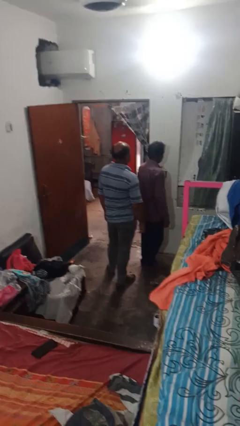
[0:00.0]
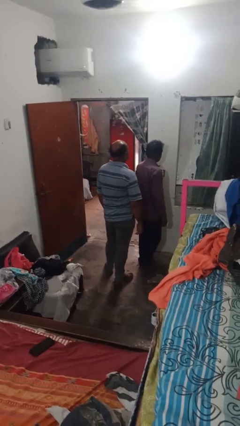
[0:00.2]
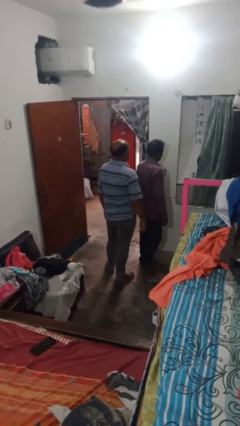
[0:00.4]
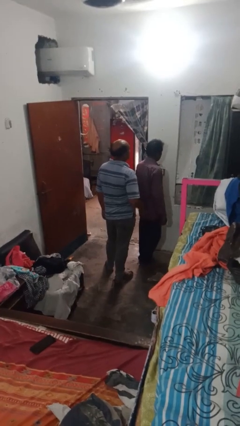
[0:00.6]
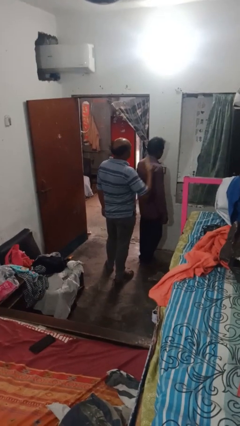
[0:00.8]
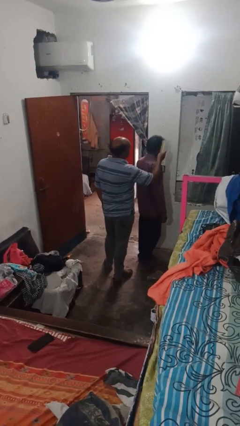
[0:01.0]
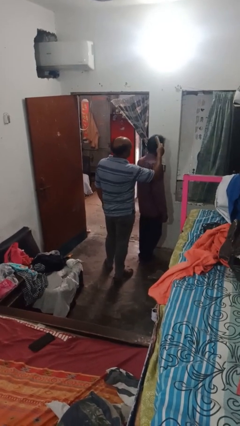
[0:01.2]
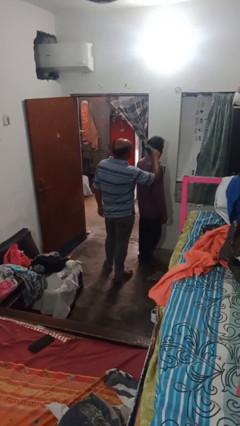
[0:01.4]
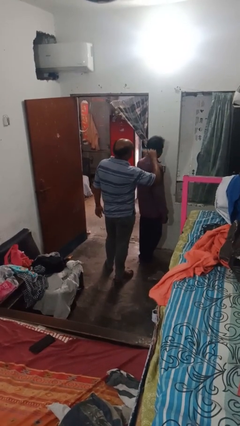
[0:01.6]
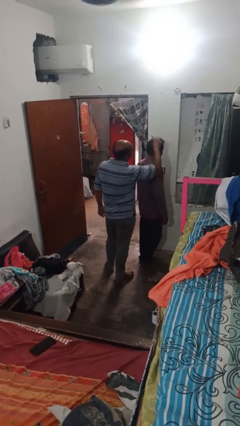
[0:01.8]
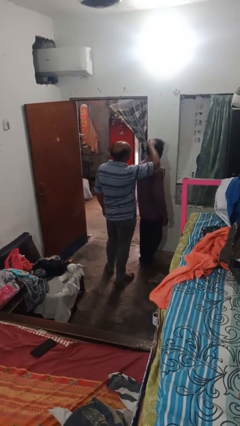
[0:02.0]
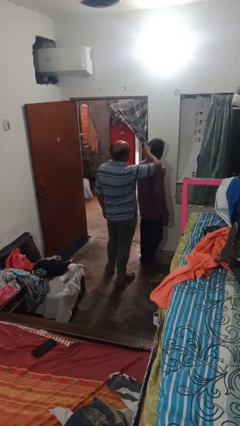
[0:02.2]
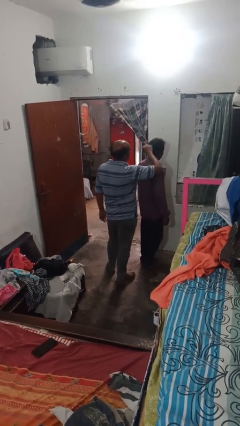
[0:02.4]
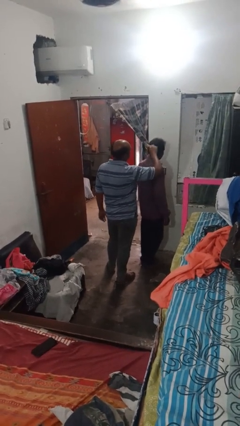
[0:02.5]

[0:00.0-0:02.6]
person brushes hair of person

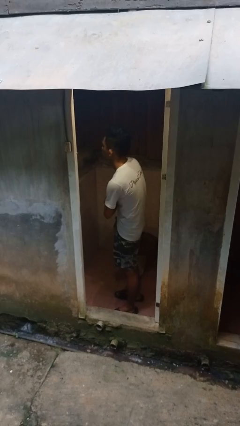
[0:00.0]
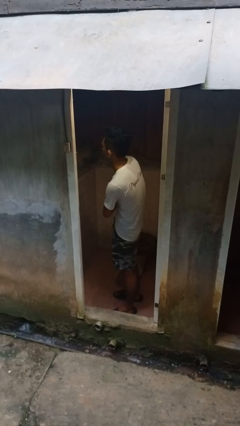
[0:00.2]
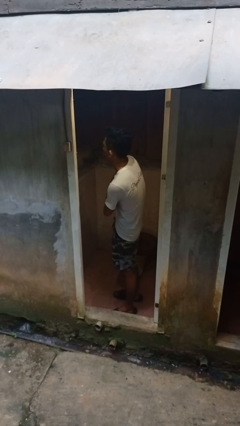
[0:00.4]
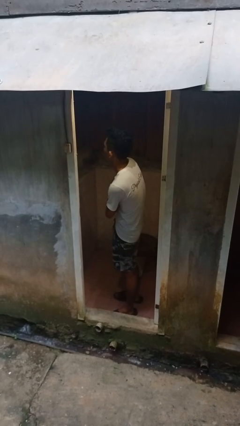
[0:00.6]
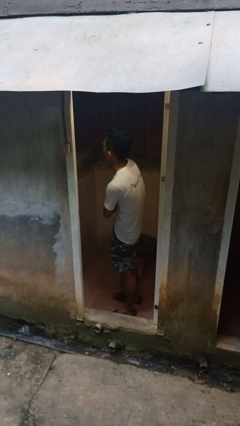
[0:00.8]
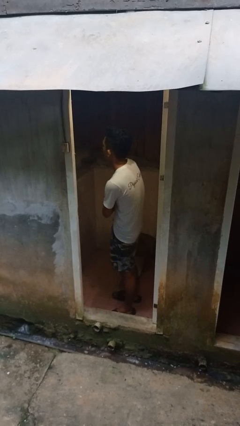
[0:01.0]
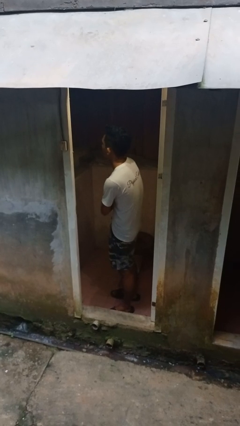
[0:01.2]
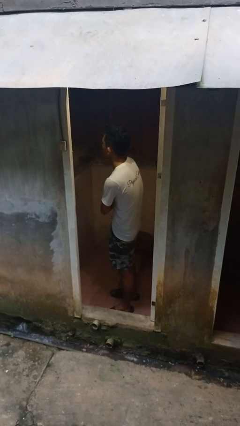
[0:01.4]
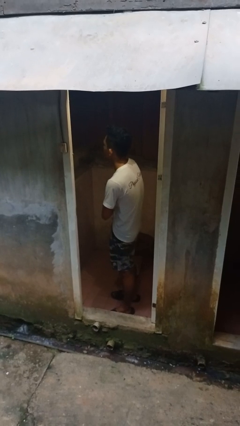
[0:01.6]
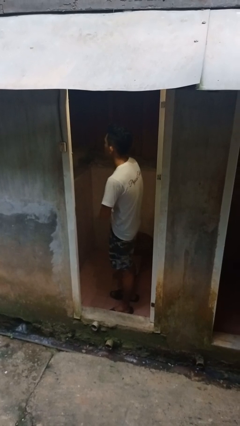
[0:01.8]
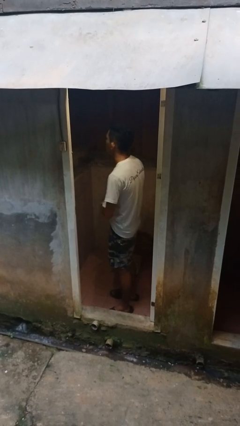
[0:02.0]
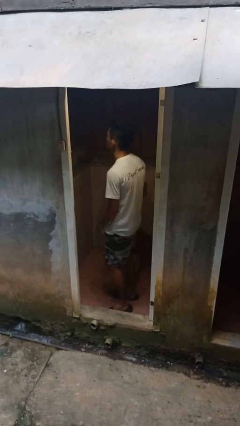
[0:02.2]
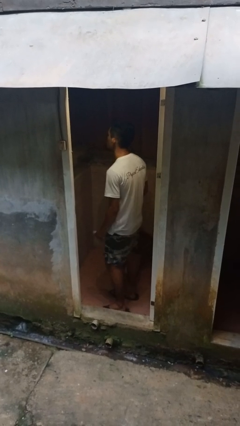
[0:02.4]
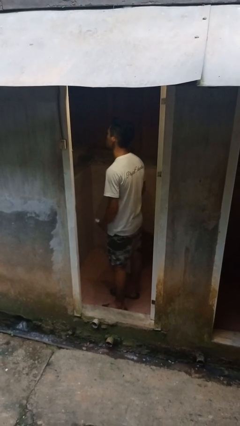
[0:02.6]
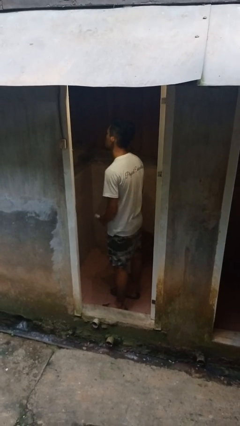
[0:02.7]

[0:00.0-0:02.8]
person applies deodorant

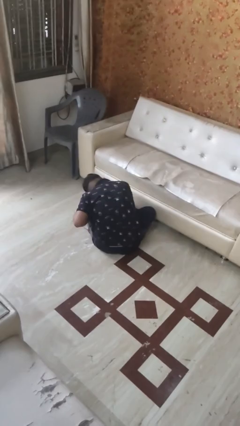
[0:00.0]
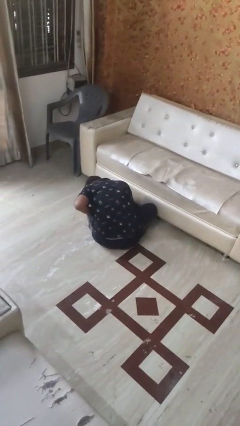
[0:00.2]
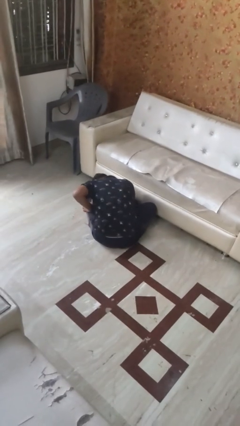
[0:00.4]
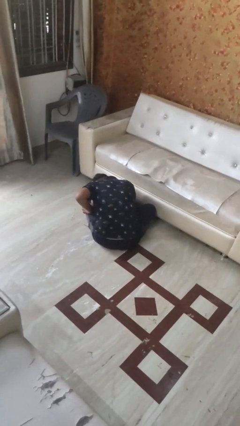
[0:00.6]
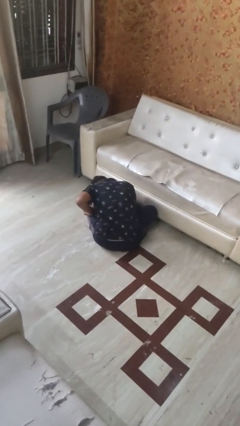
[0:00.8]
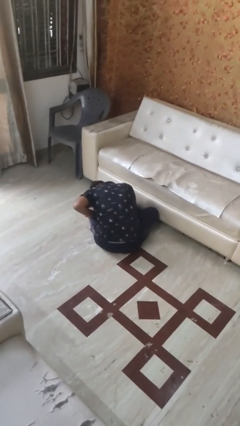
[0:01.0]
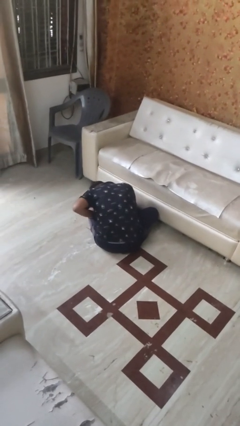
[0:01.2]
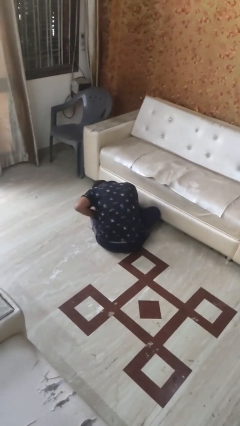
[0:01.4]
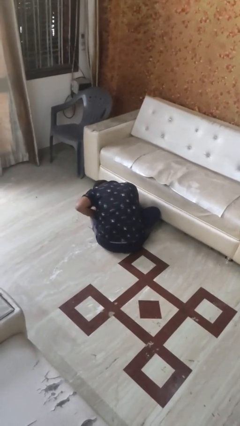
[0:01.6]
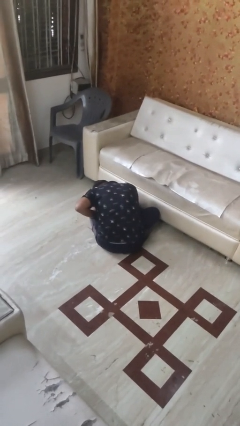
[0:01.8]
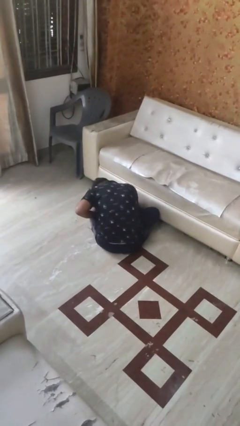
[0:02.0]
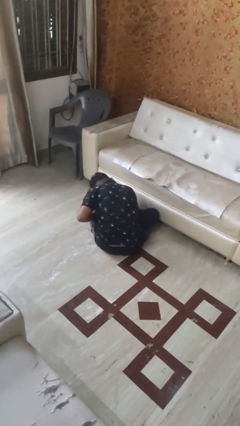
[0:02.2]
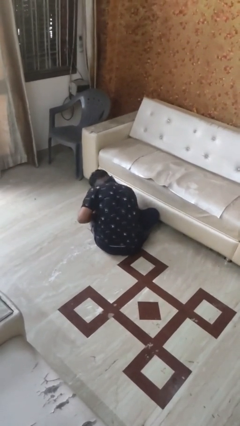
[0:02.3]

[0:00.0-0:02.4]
person searches under bed

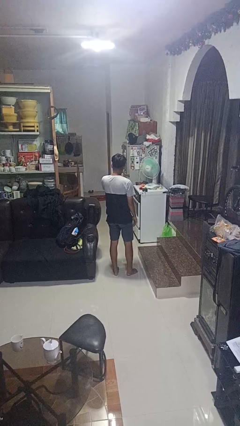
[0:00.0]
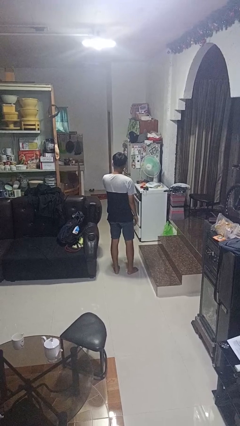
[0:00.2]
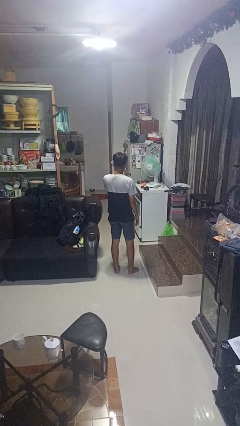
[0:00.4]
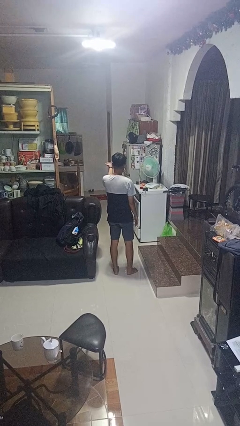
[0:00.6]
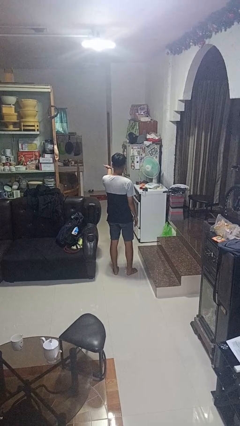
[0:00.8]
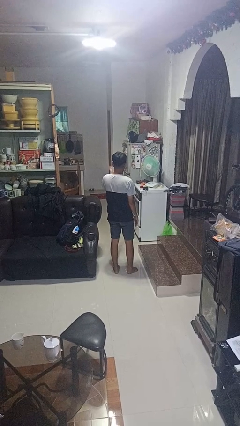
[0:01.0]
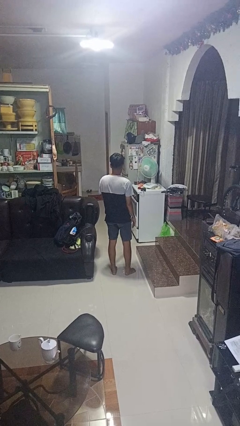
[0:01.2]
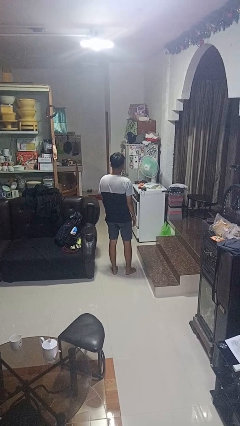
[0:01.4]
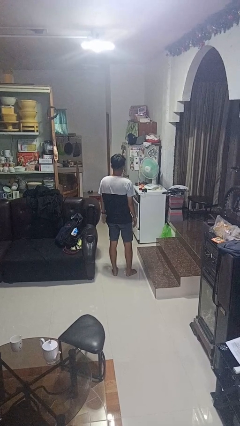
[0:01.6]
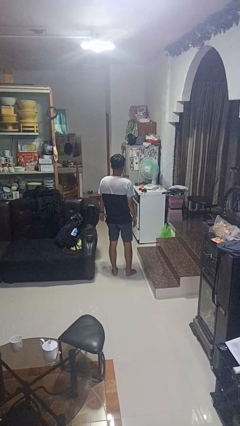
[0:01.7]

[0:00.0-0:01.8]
person gestures blow kiss

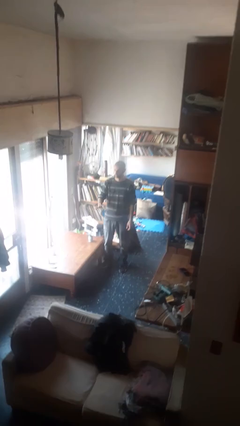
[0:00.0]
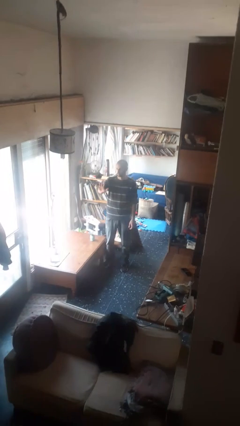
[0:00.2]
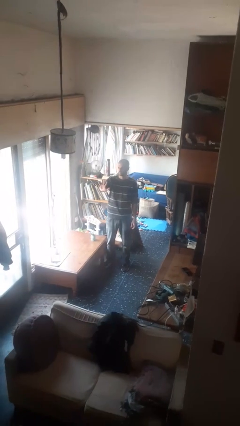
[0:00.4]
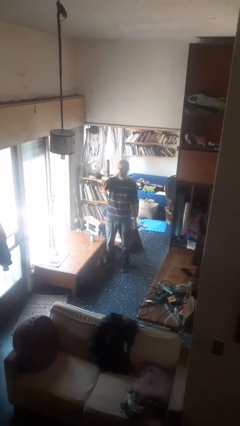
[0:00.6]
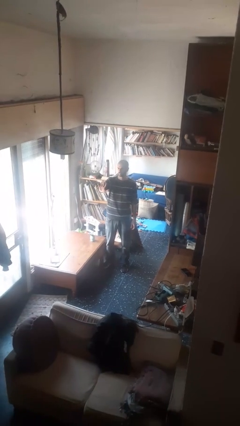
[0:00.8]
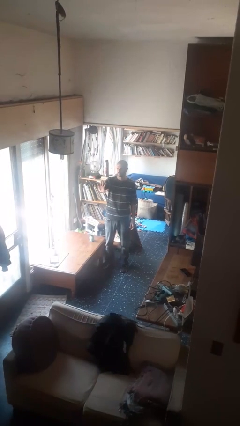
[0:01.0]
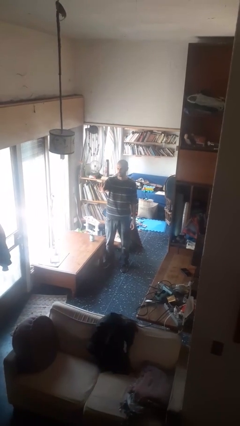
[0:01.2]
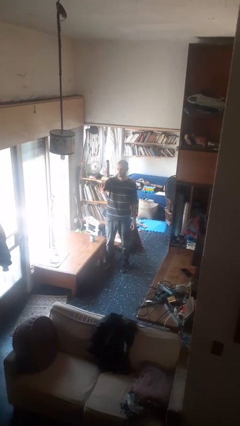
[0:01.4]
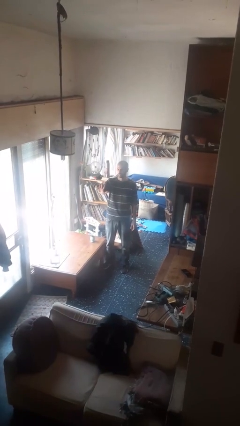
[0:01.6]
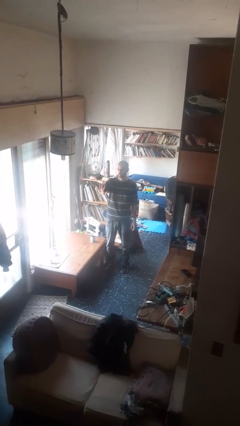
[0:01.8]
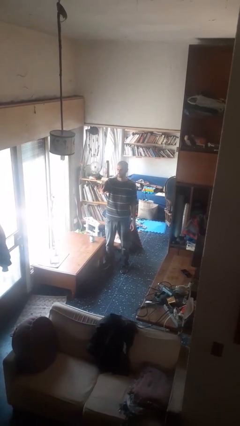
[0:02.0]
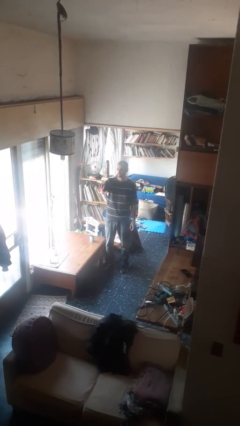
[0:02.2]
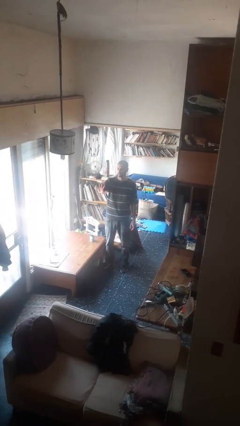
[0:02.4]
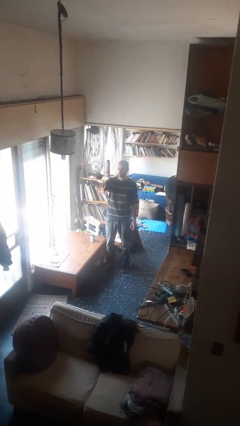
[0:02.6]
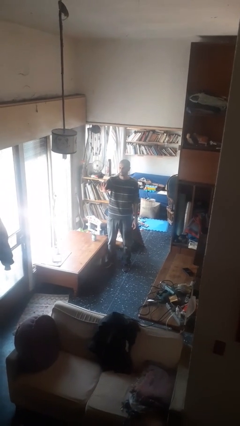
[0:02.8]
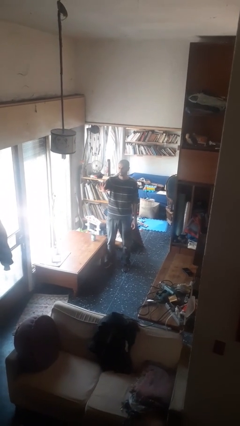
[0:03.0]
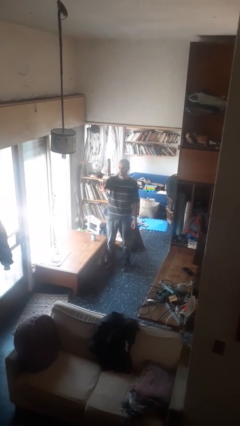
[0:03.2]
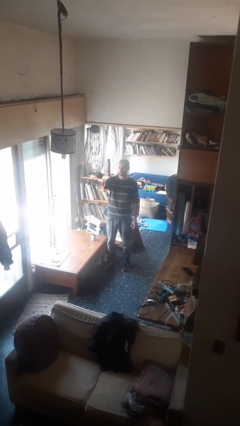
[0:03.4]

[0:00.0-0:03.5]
person gestures number five

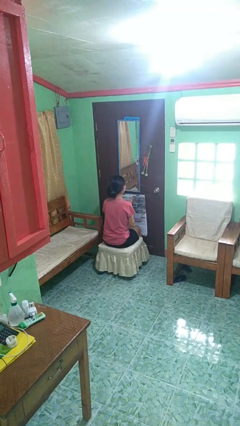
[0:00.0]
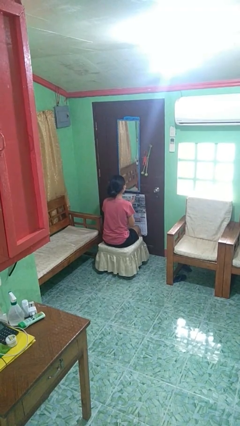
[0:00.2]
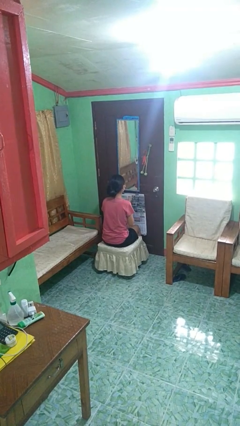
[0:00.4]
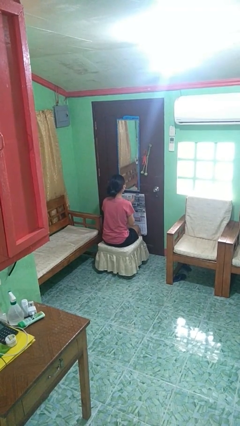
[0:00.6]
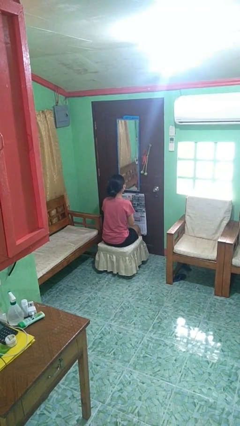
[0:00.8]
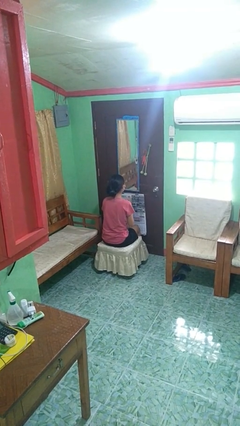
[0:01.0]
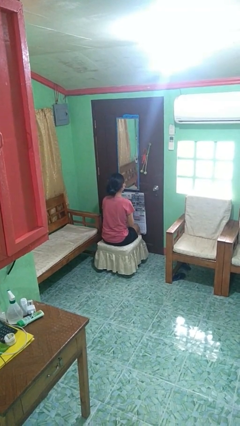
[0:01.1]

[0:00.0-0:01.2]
person claps hands

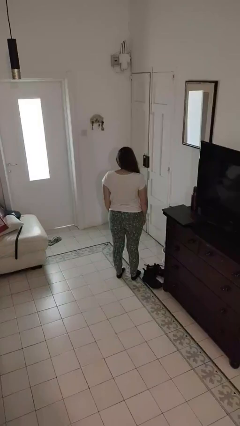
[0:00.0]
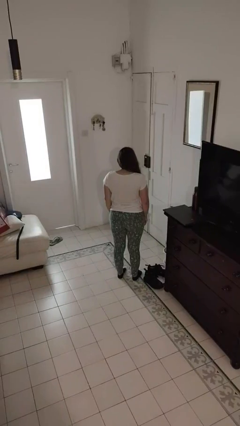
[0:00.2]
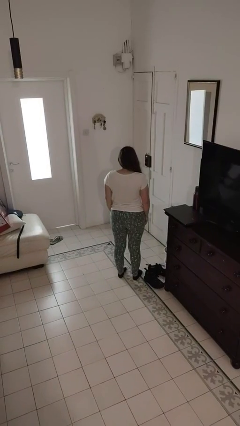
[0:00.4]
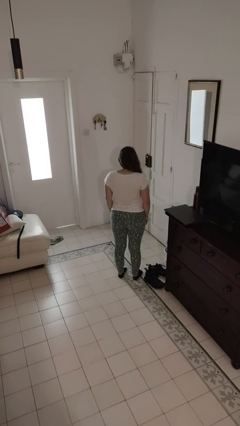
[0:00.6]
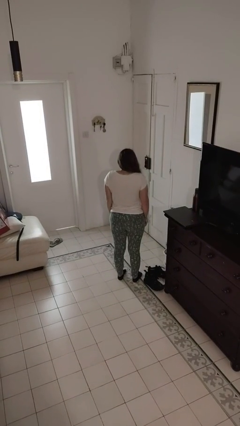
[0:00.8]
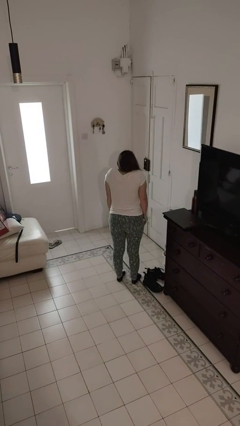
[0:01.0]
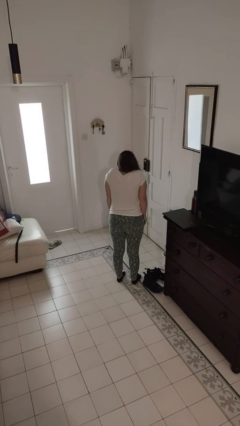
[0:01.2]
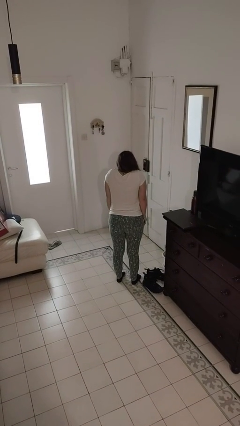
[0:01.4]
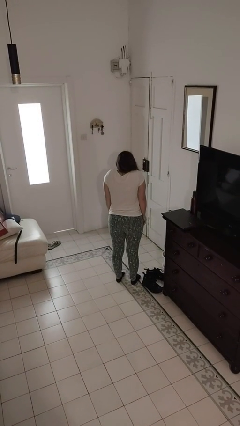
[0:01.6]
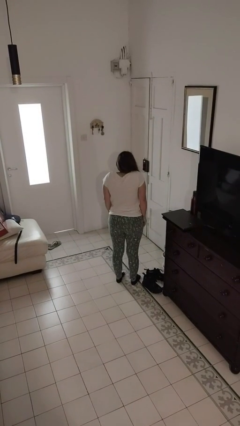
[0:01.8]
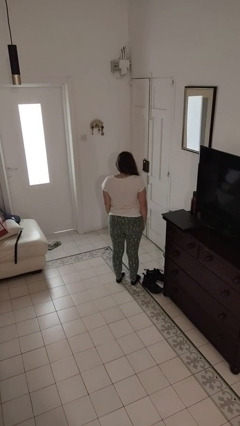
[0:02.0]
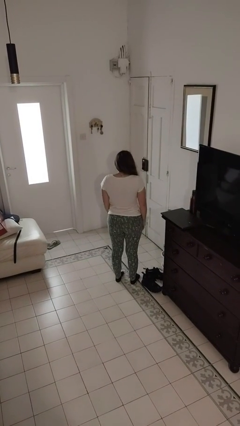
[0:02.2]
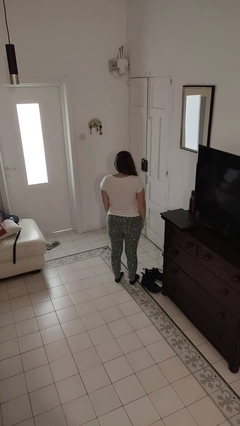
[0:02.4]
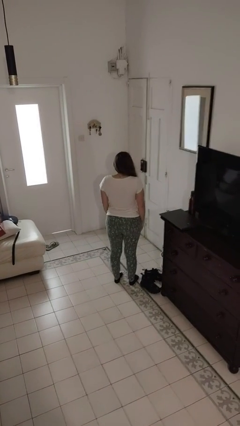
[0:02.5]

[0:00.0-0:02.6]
person shrugs
